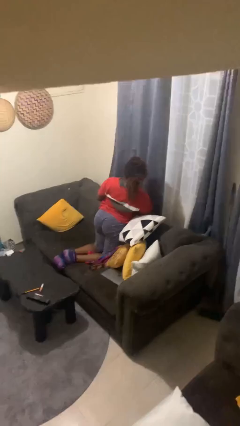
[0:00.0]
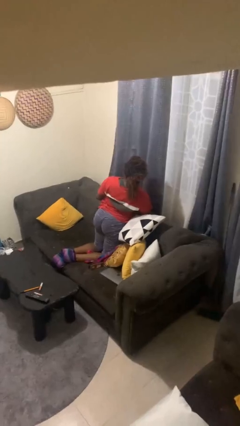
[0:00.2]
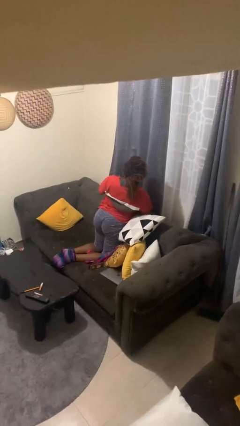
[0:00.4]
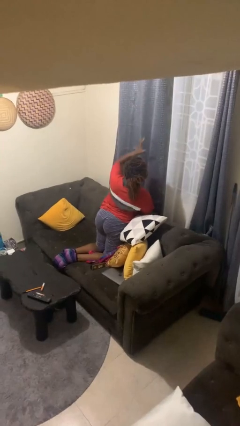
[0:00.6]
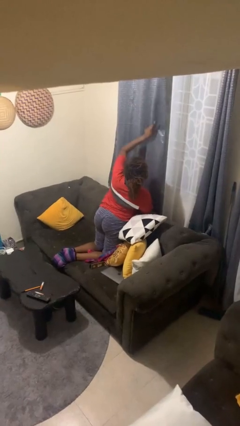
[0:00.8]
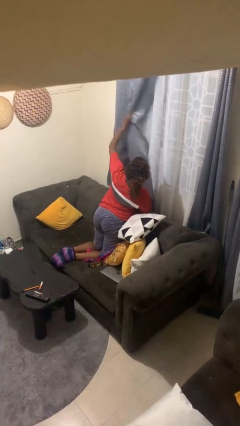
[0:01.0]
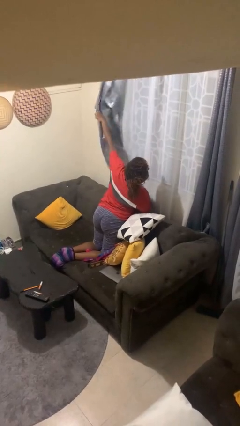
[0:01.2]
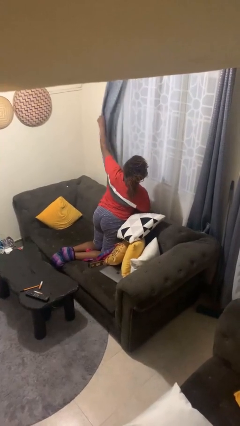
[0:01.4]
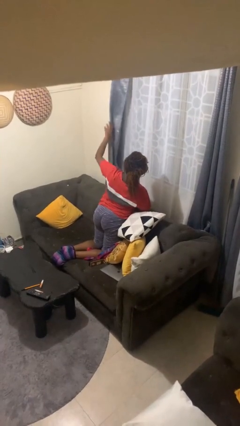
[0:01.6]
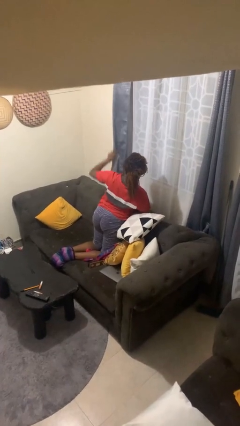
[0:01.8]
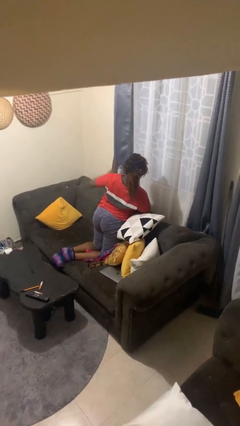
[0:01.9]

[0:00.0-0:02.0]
person opens curtains

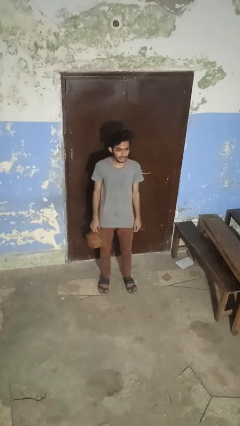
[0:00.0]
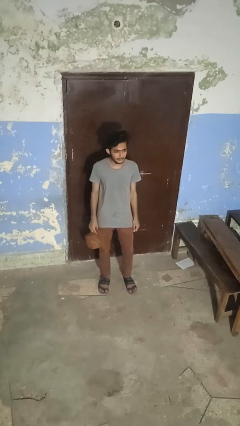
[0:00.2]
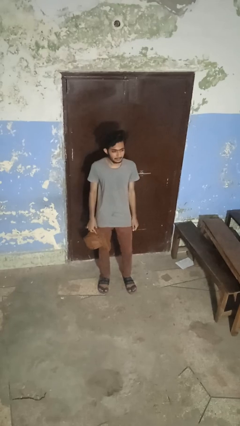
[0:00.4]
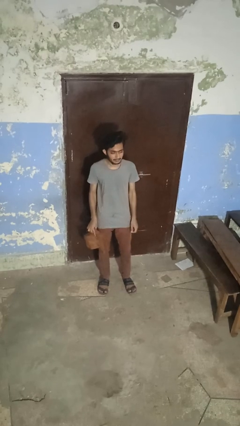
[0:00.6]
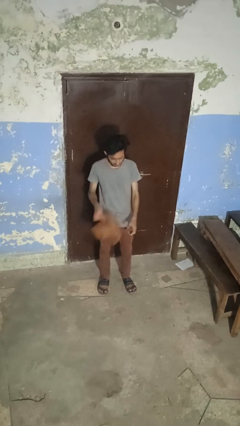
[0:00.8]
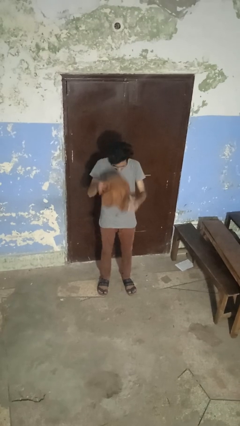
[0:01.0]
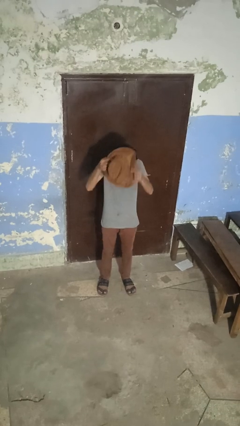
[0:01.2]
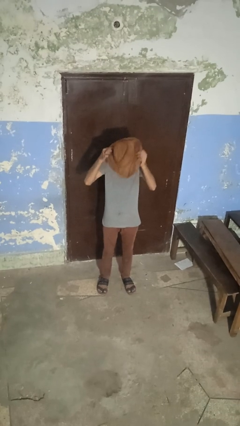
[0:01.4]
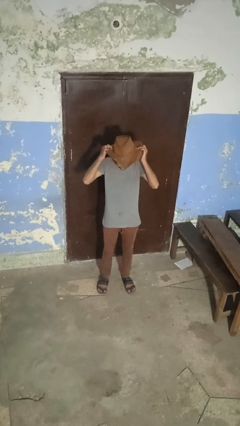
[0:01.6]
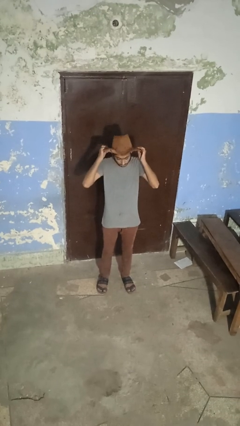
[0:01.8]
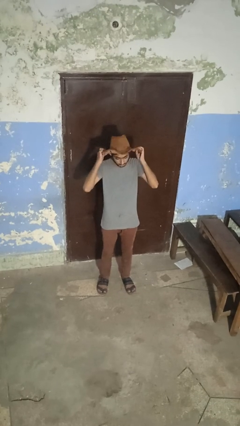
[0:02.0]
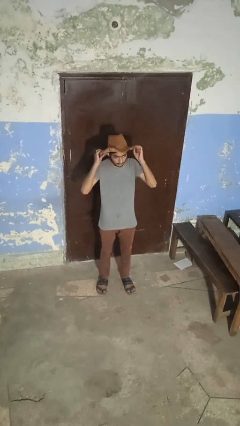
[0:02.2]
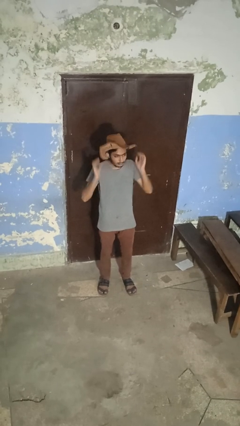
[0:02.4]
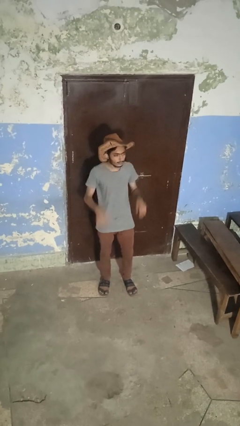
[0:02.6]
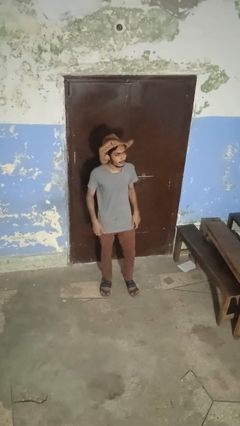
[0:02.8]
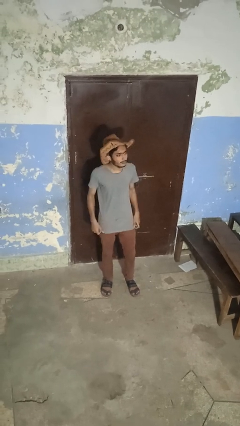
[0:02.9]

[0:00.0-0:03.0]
person puts on hat

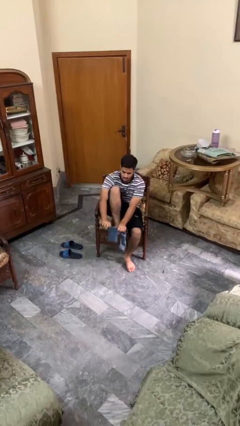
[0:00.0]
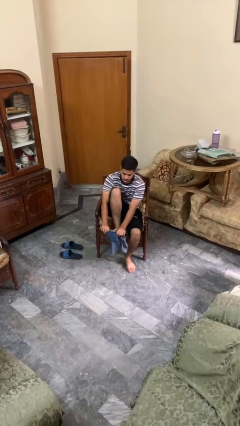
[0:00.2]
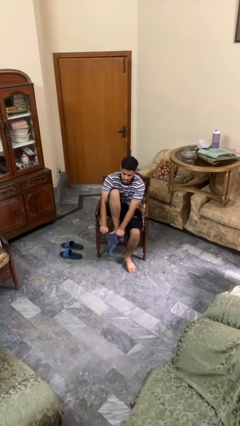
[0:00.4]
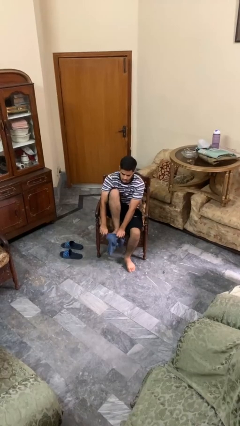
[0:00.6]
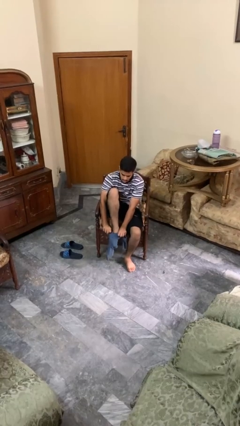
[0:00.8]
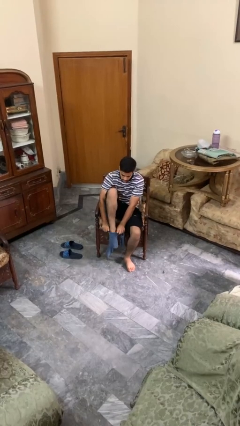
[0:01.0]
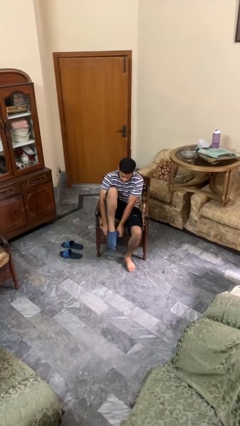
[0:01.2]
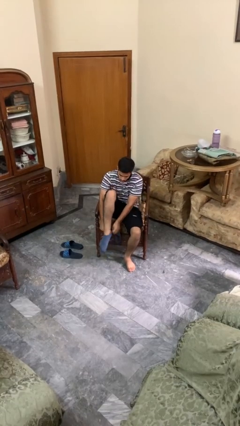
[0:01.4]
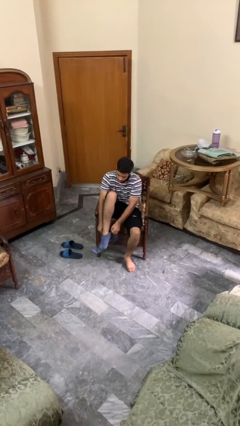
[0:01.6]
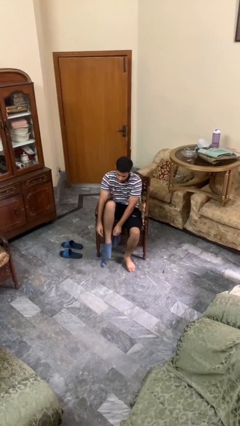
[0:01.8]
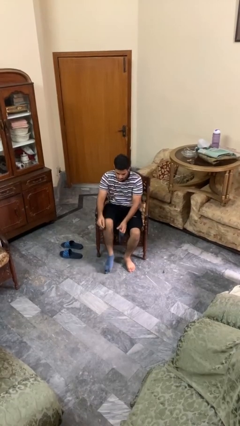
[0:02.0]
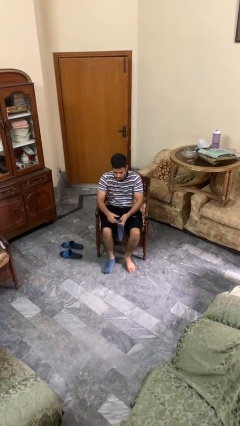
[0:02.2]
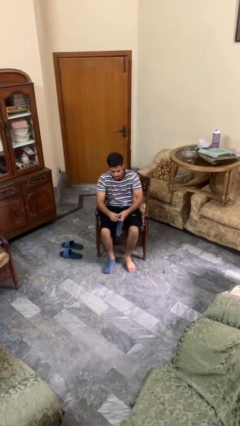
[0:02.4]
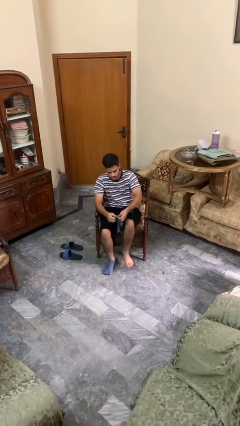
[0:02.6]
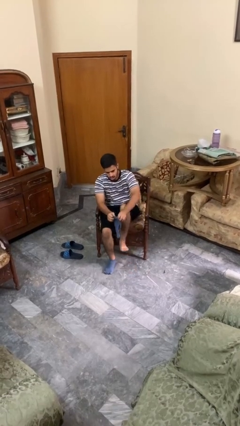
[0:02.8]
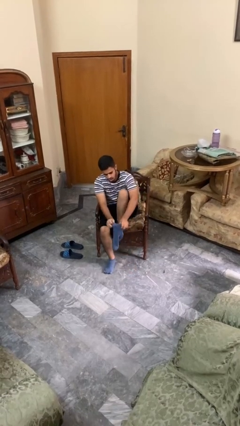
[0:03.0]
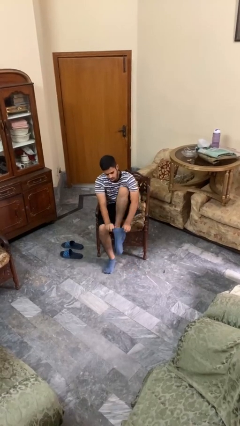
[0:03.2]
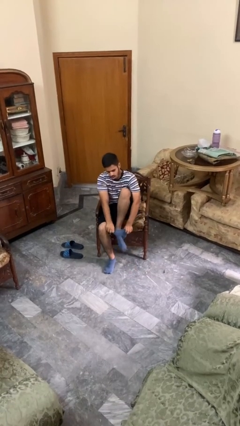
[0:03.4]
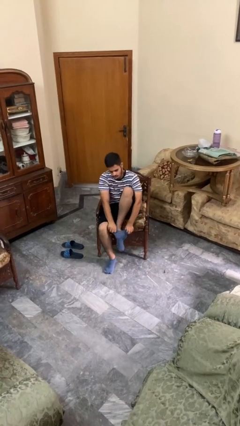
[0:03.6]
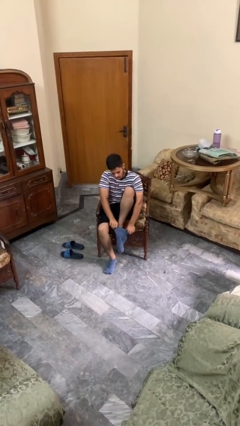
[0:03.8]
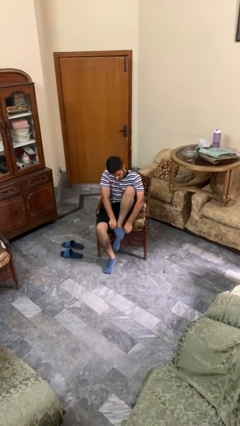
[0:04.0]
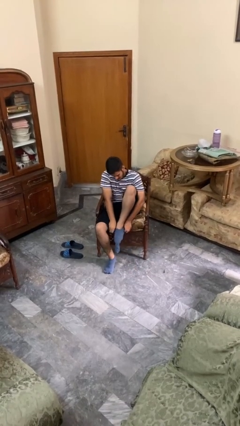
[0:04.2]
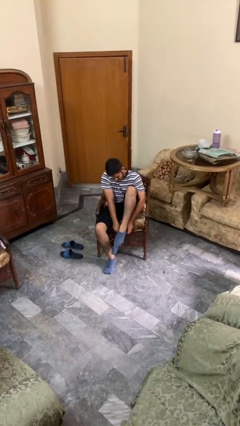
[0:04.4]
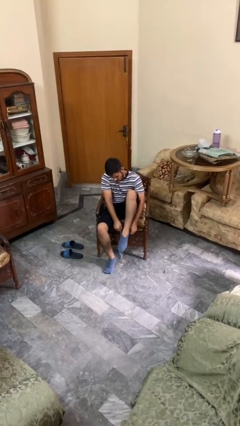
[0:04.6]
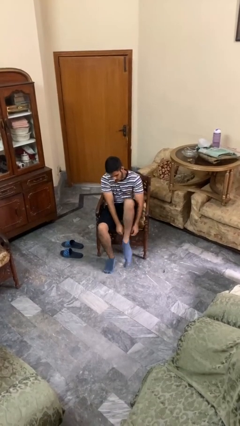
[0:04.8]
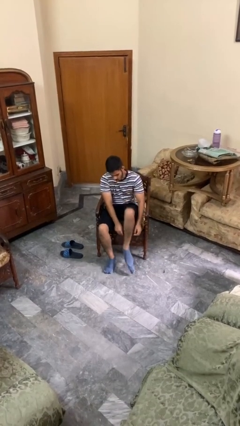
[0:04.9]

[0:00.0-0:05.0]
person puts on socks

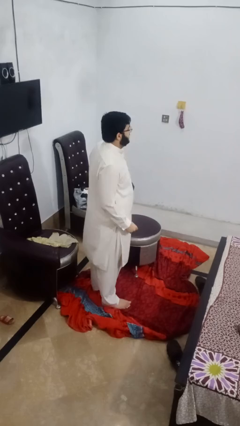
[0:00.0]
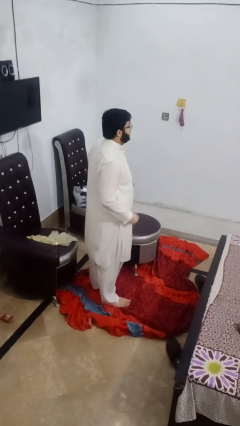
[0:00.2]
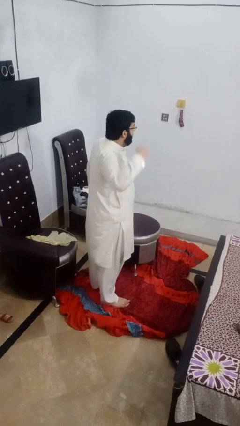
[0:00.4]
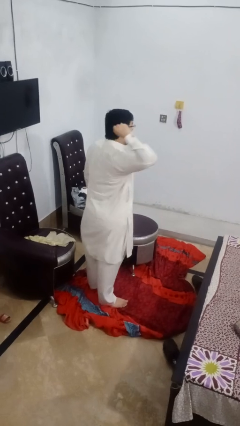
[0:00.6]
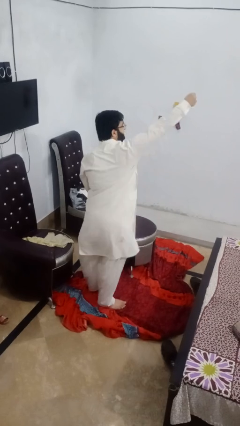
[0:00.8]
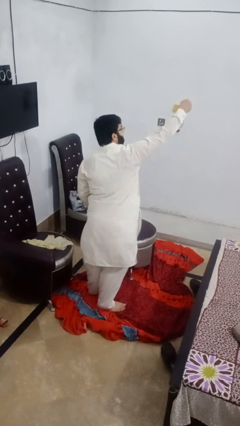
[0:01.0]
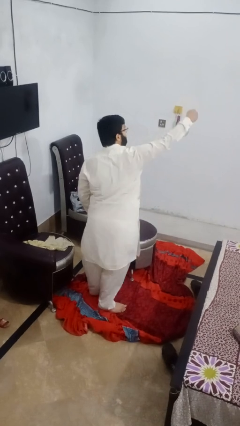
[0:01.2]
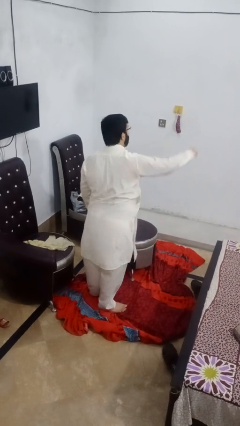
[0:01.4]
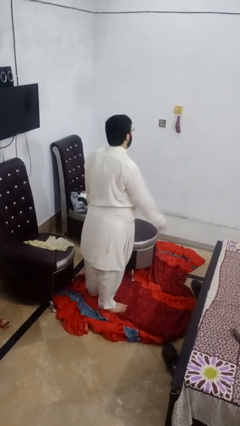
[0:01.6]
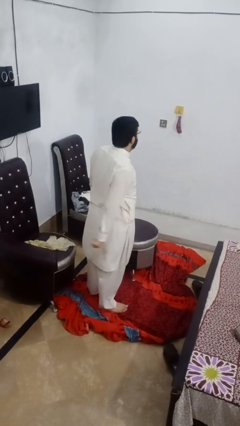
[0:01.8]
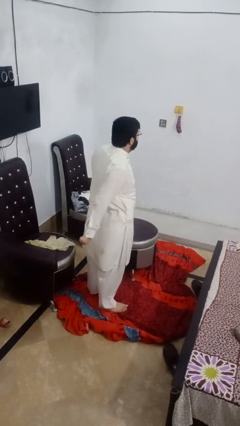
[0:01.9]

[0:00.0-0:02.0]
person punches

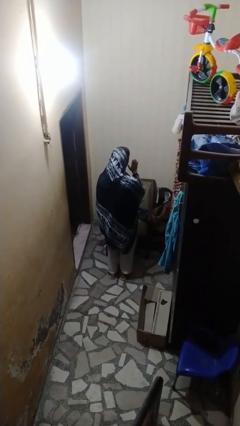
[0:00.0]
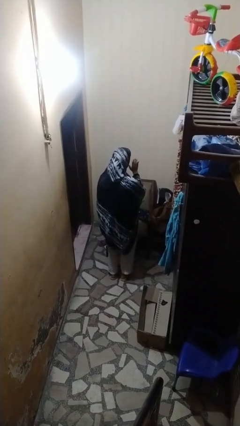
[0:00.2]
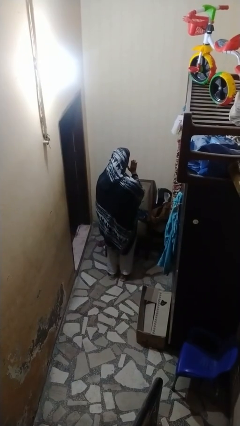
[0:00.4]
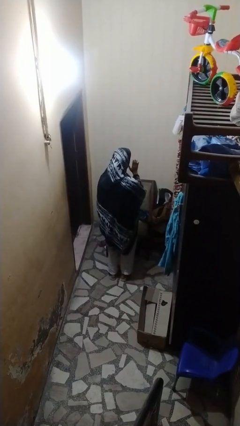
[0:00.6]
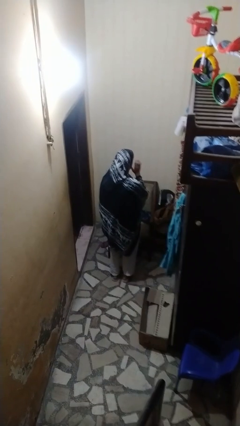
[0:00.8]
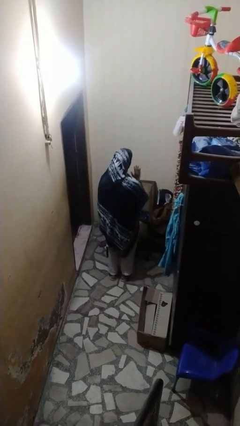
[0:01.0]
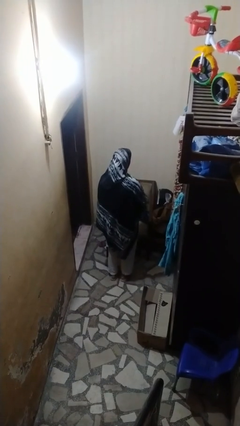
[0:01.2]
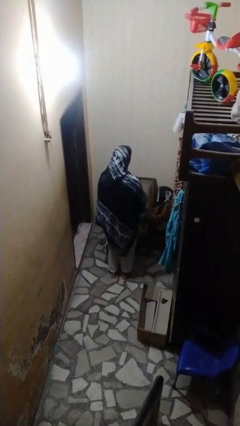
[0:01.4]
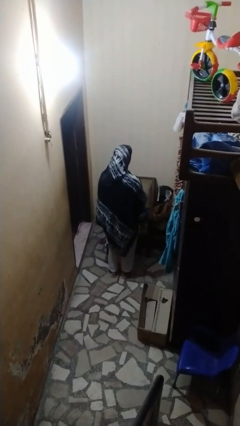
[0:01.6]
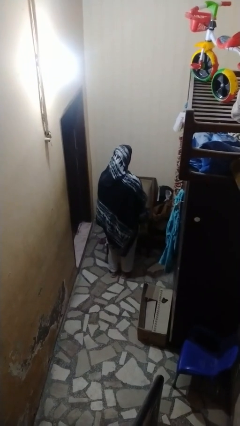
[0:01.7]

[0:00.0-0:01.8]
person gestures stop

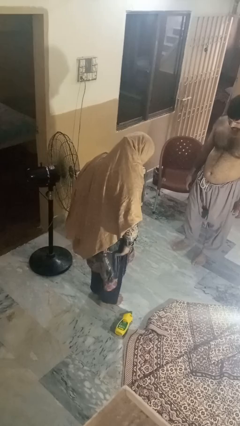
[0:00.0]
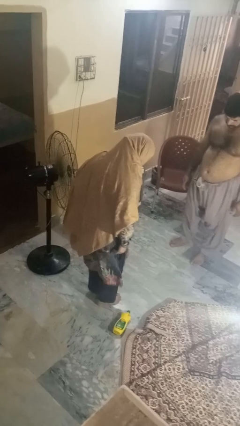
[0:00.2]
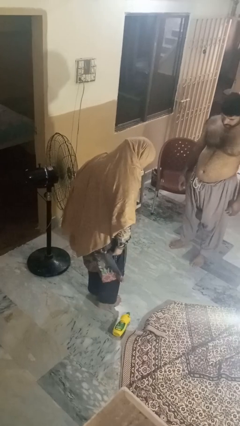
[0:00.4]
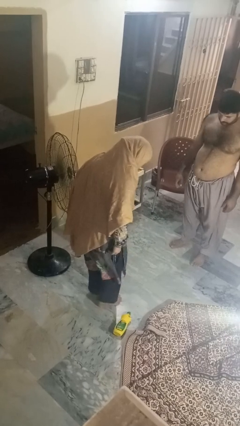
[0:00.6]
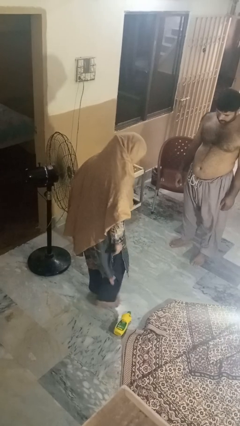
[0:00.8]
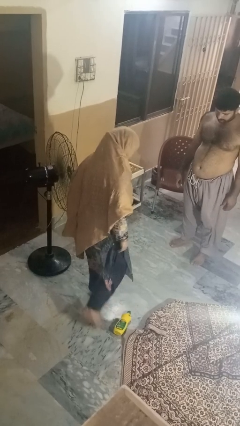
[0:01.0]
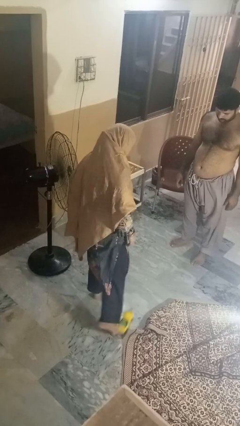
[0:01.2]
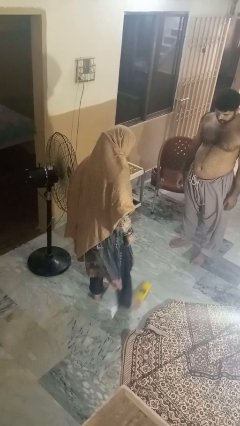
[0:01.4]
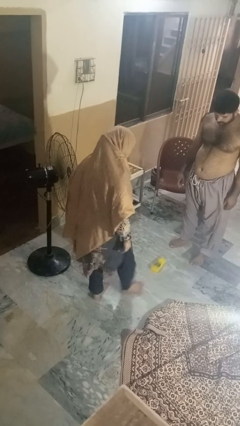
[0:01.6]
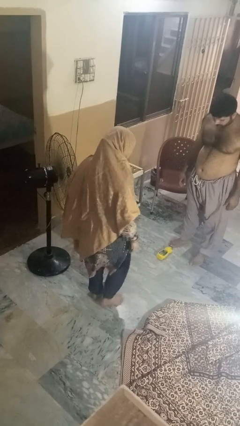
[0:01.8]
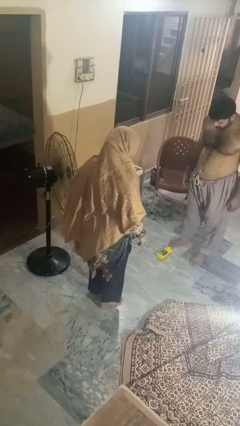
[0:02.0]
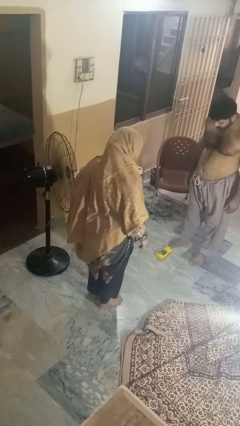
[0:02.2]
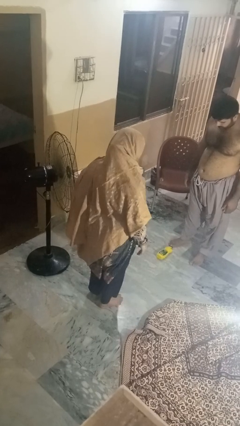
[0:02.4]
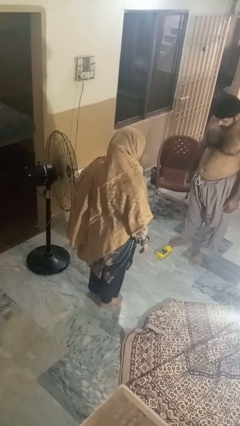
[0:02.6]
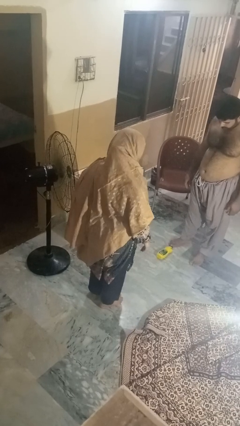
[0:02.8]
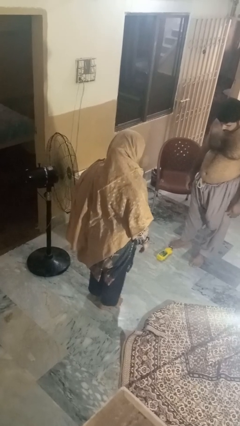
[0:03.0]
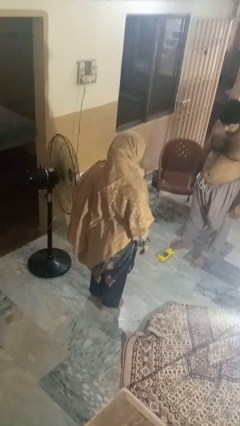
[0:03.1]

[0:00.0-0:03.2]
person kicks object to person

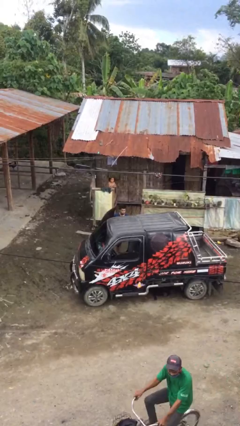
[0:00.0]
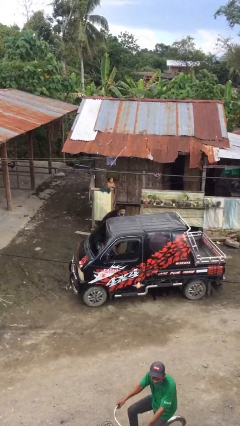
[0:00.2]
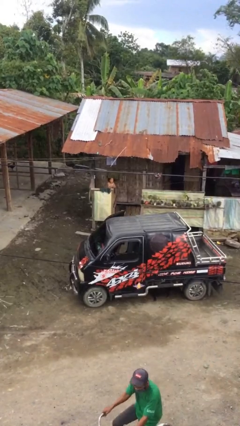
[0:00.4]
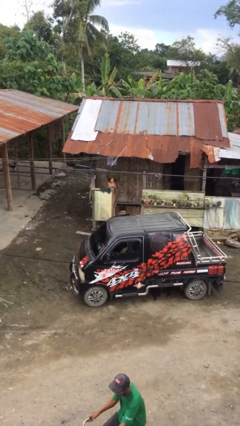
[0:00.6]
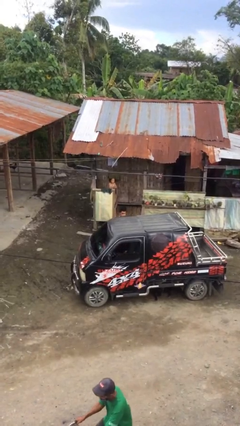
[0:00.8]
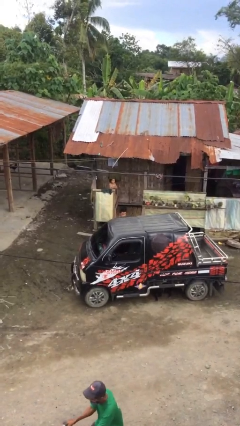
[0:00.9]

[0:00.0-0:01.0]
person closes car door
